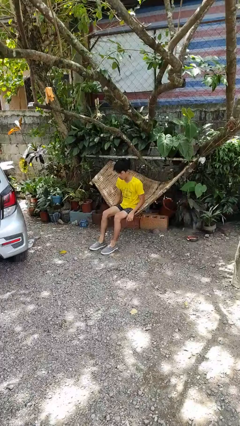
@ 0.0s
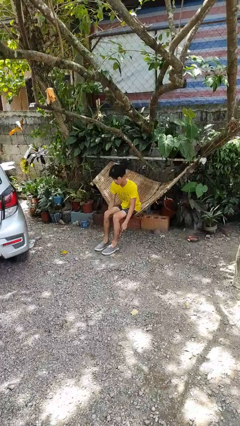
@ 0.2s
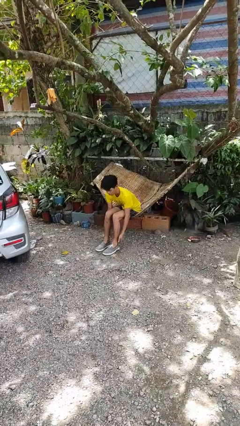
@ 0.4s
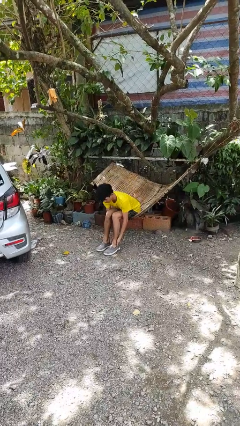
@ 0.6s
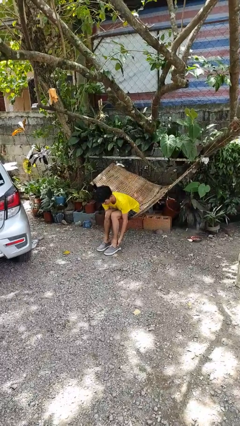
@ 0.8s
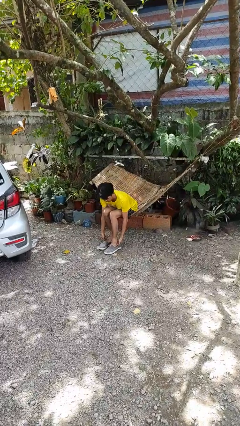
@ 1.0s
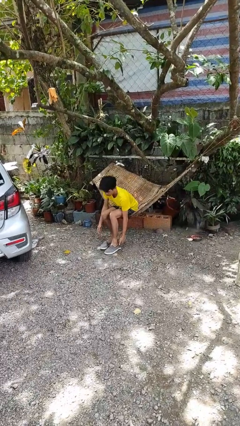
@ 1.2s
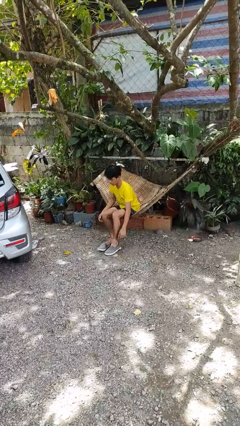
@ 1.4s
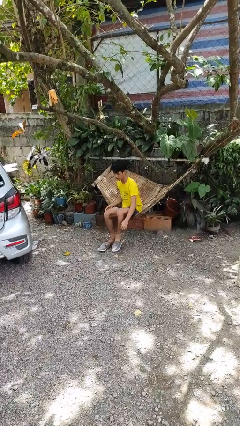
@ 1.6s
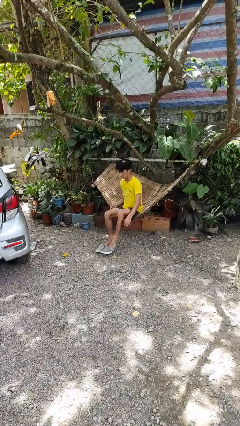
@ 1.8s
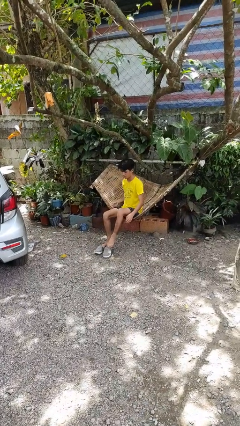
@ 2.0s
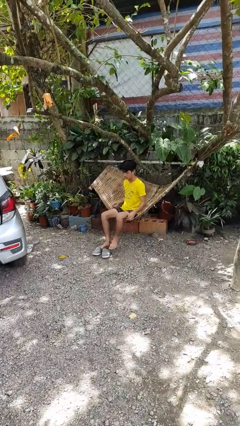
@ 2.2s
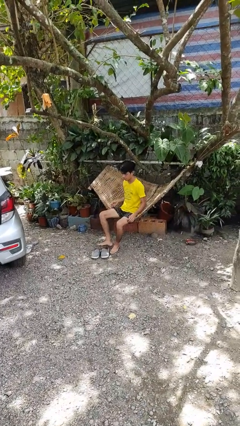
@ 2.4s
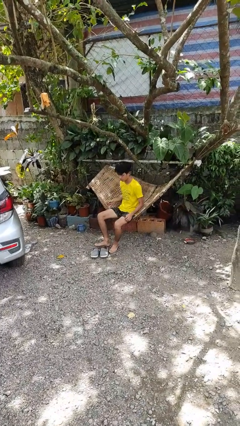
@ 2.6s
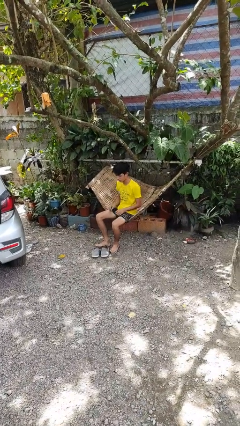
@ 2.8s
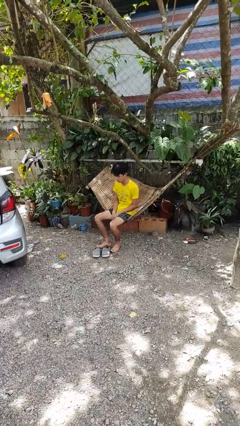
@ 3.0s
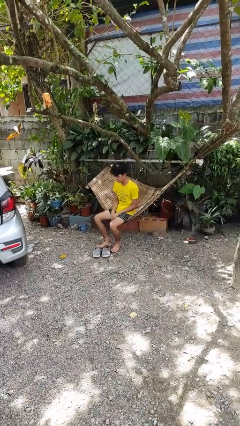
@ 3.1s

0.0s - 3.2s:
person takes off shoes

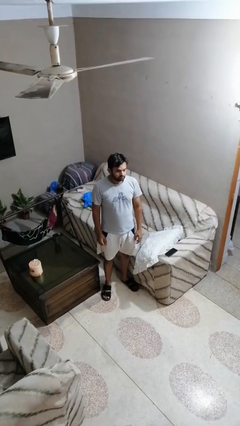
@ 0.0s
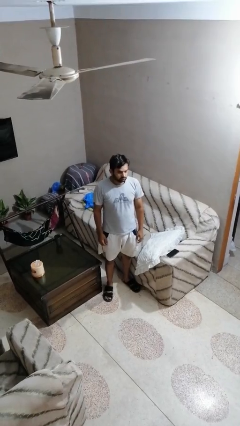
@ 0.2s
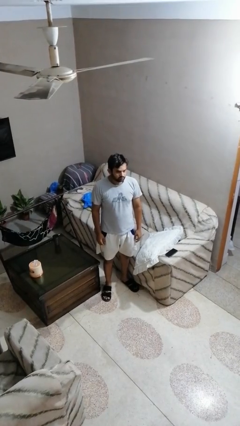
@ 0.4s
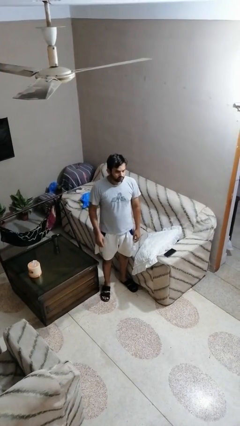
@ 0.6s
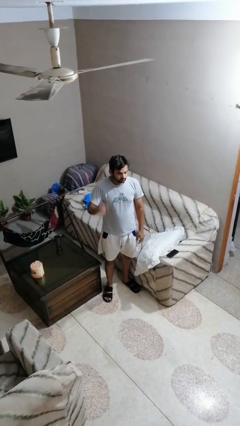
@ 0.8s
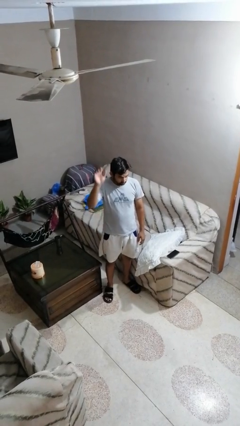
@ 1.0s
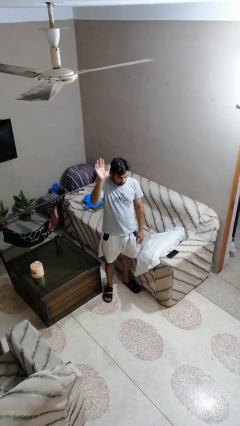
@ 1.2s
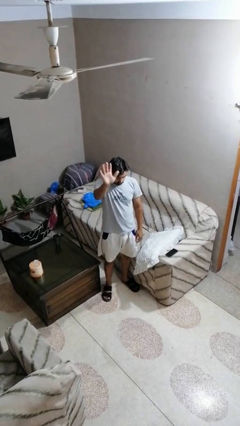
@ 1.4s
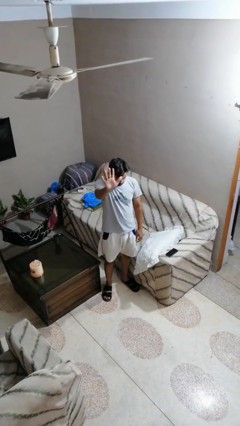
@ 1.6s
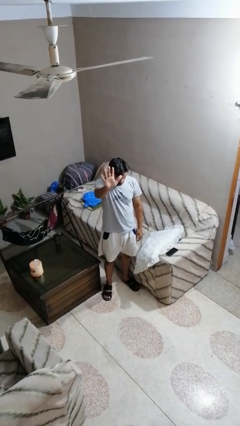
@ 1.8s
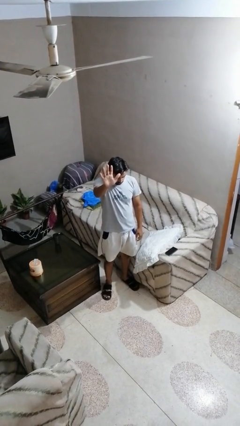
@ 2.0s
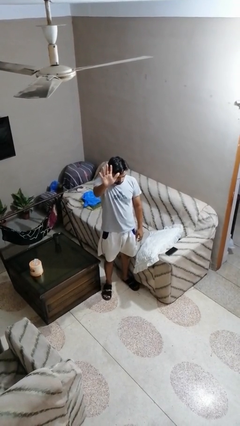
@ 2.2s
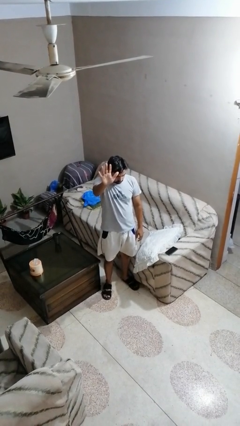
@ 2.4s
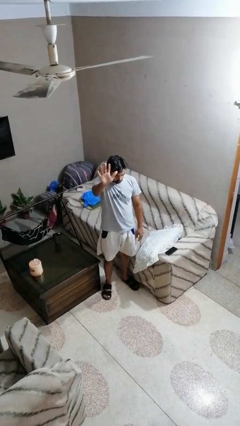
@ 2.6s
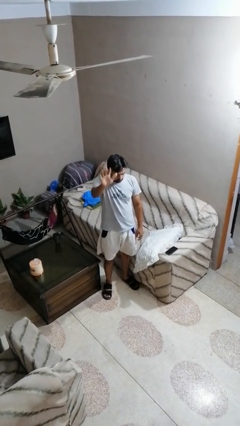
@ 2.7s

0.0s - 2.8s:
person gestures stop

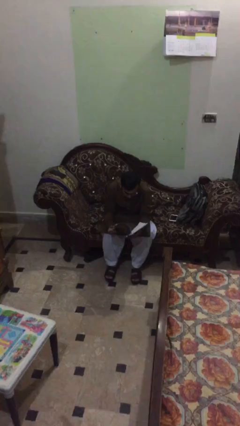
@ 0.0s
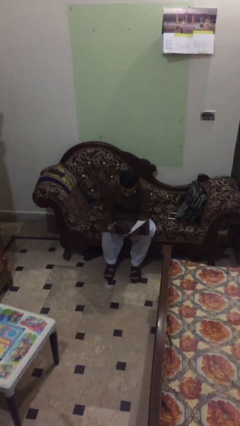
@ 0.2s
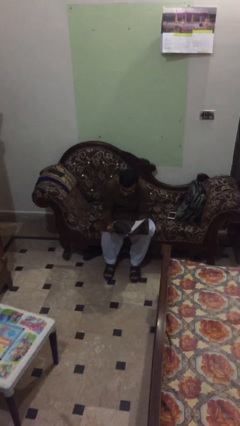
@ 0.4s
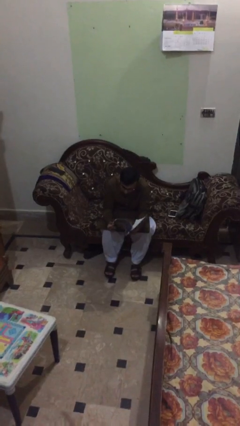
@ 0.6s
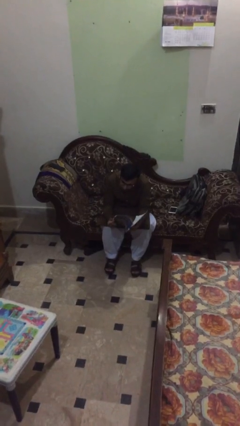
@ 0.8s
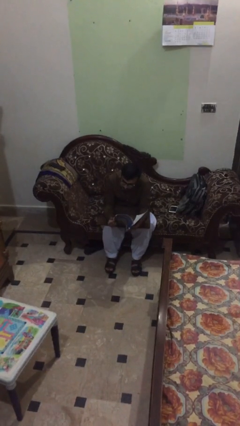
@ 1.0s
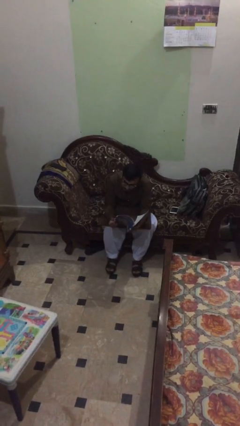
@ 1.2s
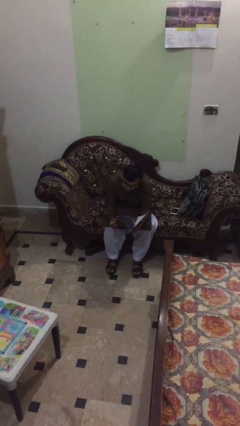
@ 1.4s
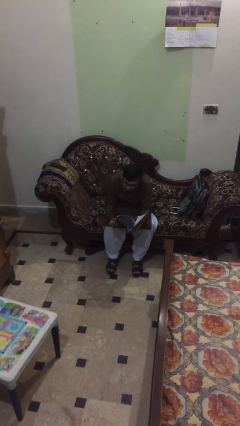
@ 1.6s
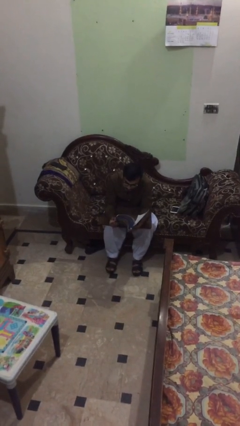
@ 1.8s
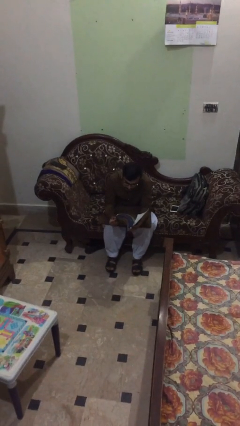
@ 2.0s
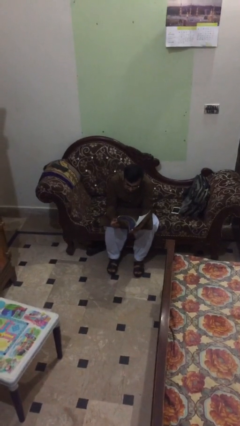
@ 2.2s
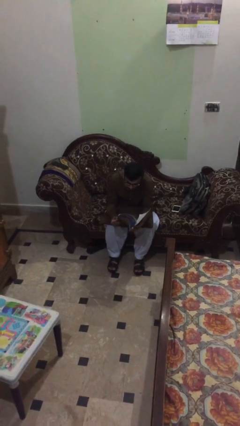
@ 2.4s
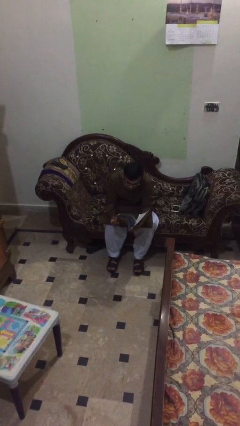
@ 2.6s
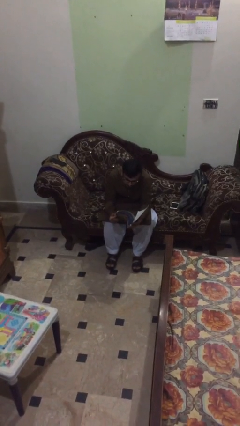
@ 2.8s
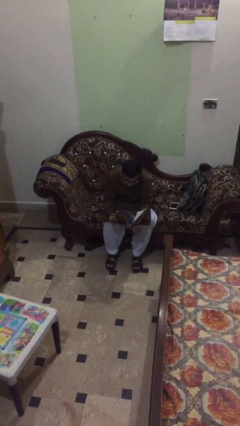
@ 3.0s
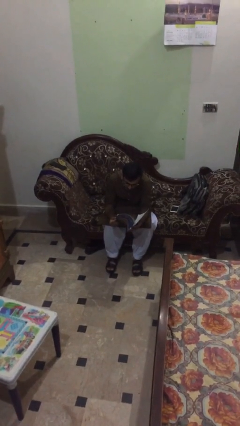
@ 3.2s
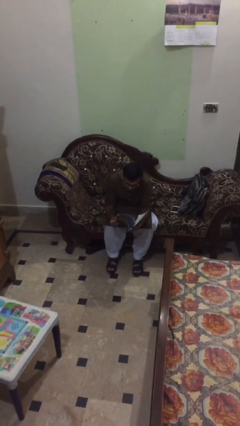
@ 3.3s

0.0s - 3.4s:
person reads document

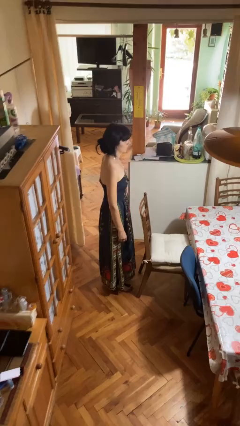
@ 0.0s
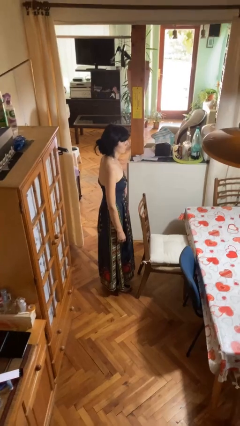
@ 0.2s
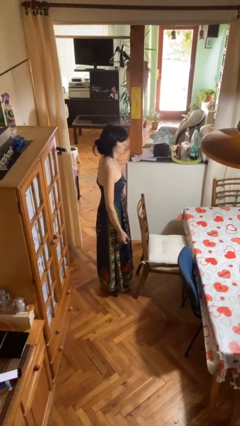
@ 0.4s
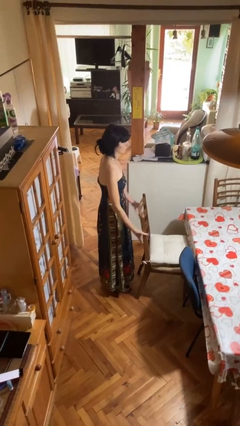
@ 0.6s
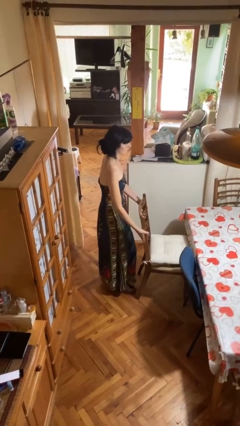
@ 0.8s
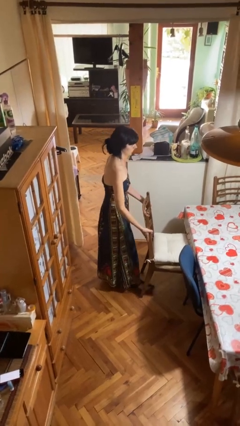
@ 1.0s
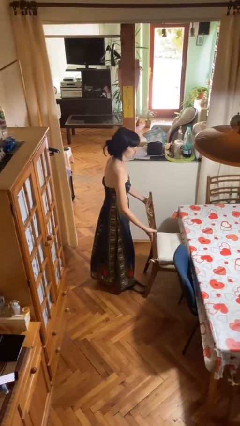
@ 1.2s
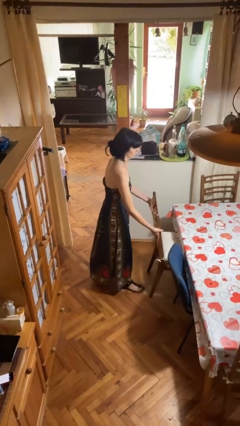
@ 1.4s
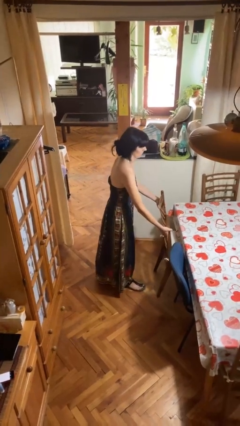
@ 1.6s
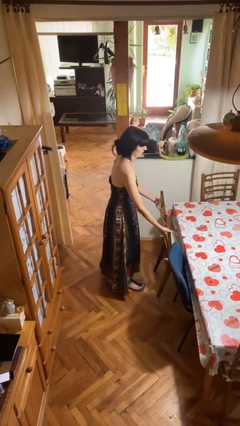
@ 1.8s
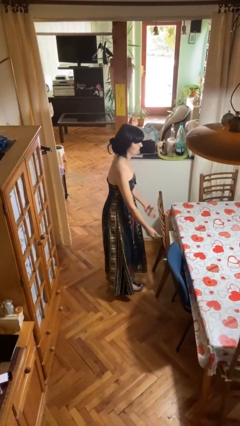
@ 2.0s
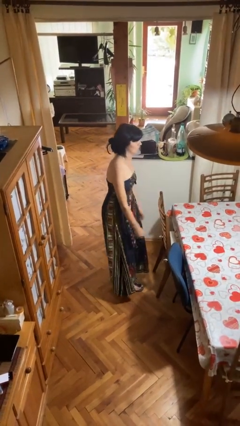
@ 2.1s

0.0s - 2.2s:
person pushes in chair

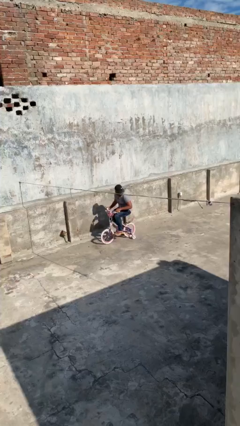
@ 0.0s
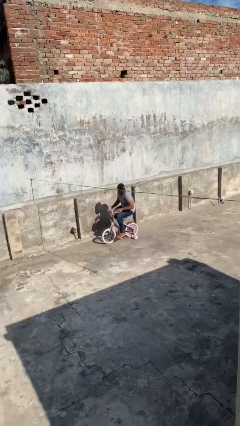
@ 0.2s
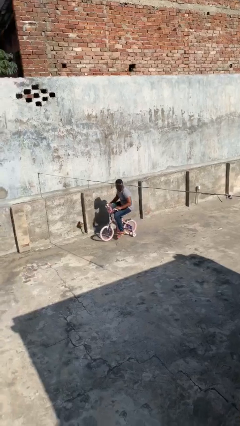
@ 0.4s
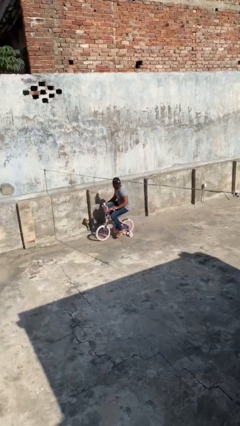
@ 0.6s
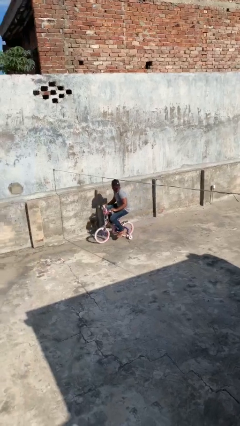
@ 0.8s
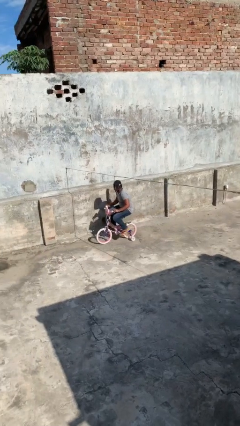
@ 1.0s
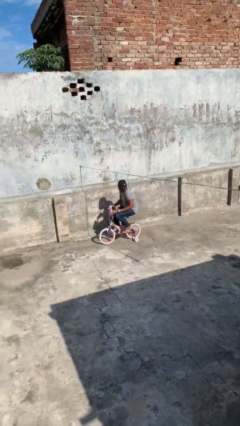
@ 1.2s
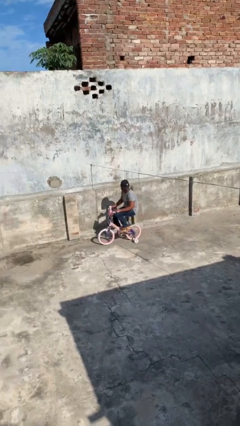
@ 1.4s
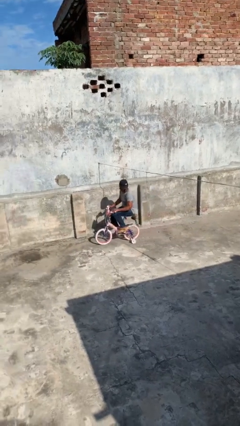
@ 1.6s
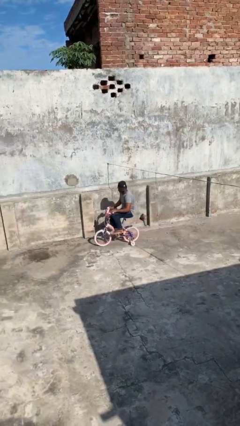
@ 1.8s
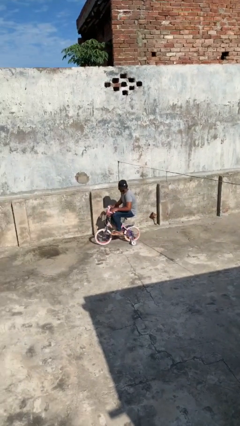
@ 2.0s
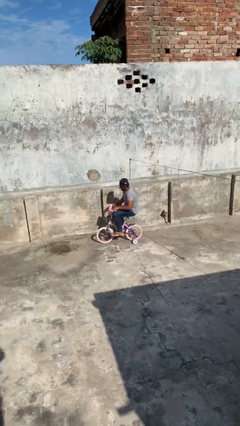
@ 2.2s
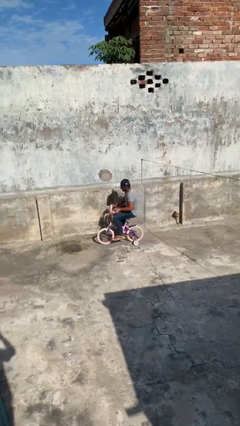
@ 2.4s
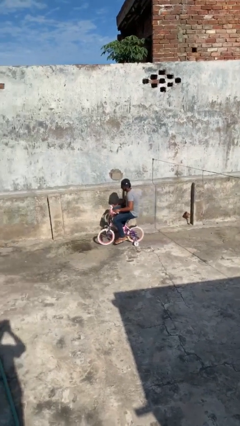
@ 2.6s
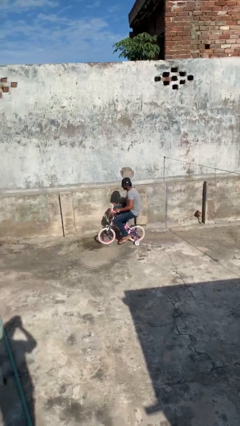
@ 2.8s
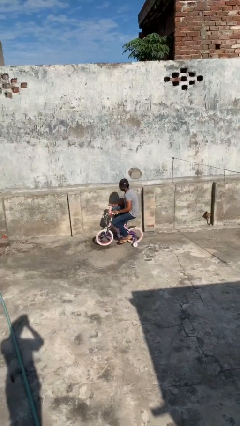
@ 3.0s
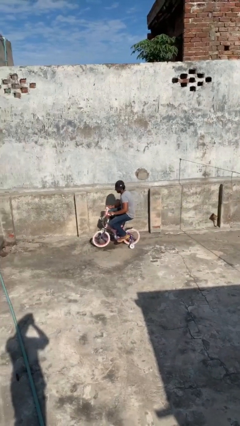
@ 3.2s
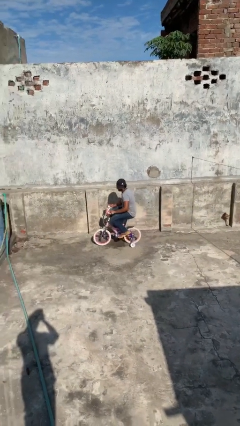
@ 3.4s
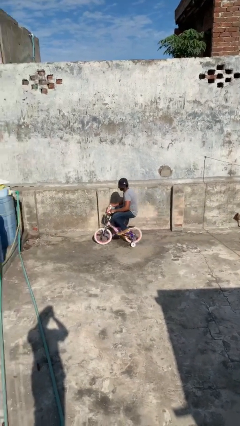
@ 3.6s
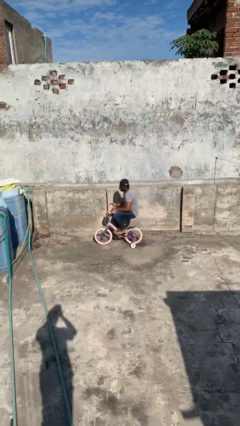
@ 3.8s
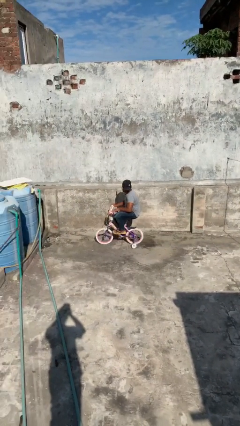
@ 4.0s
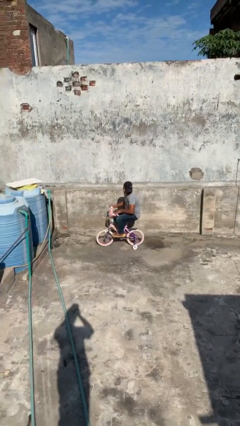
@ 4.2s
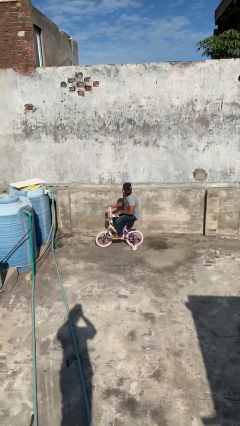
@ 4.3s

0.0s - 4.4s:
person rides bicycle

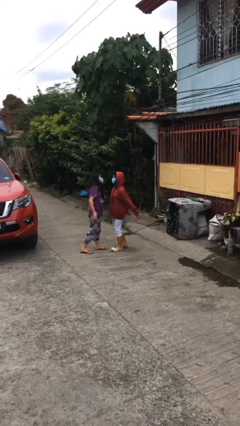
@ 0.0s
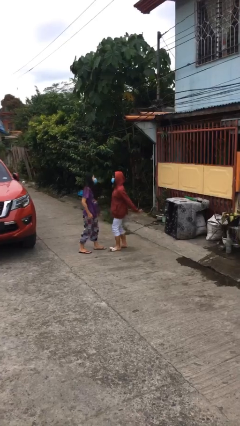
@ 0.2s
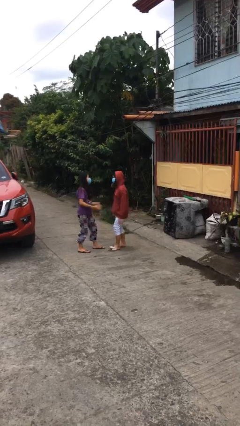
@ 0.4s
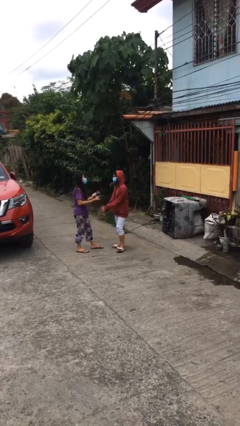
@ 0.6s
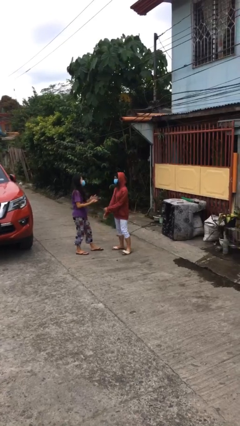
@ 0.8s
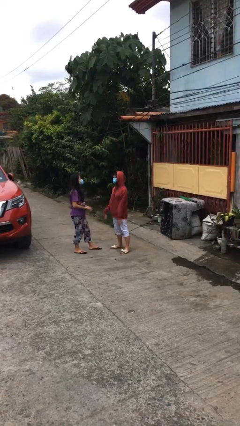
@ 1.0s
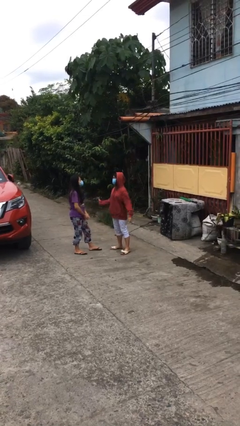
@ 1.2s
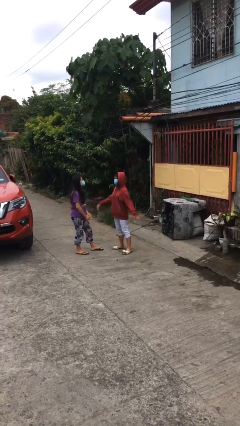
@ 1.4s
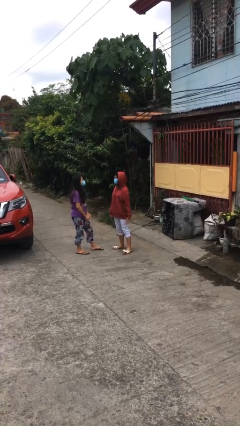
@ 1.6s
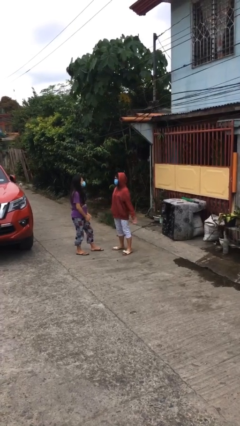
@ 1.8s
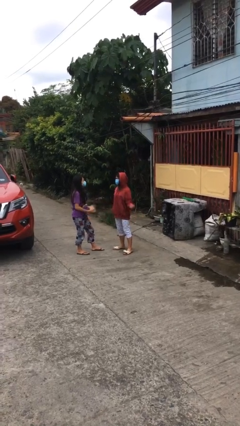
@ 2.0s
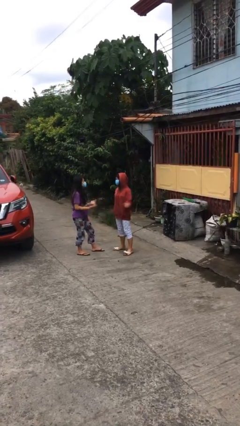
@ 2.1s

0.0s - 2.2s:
person talks to person
